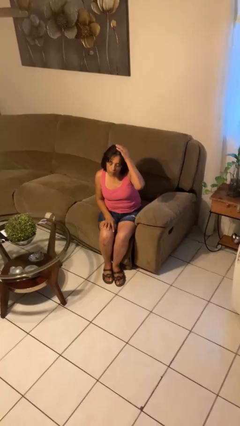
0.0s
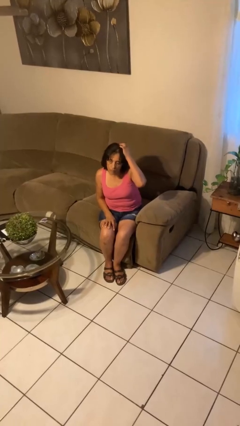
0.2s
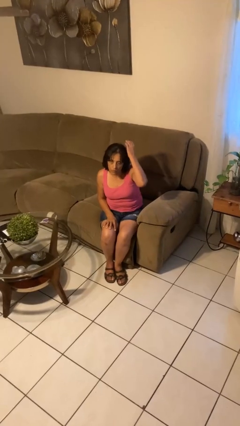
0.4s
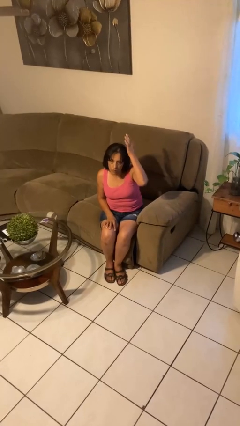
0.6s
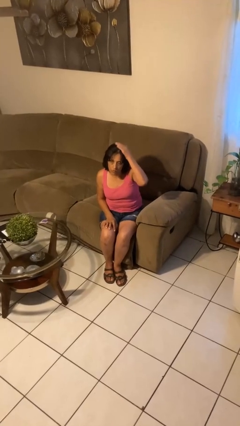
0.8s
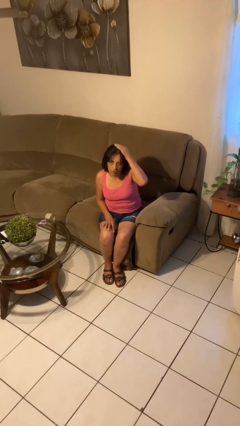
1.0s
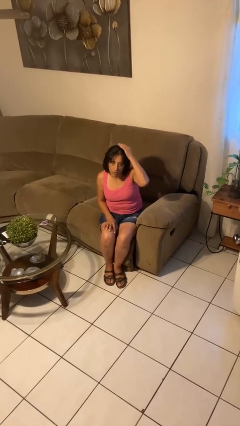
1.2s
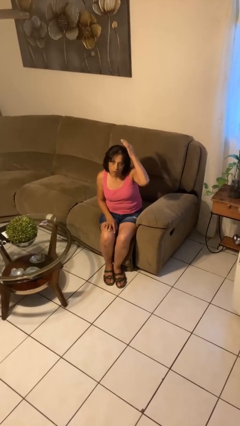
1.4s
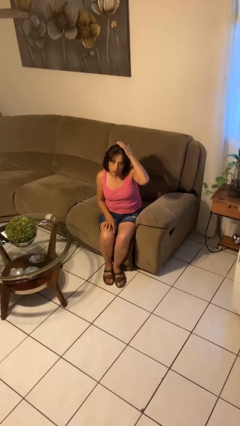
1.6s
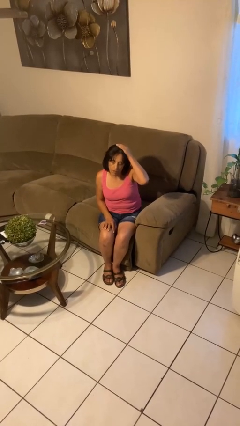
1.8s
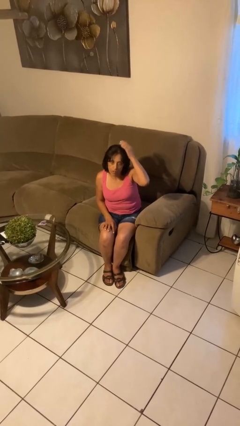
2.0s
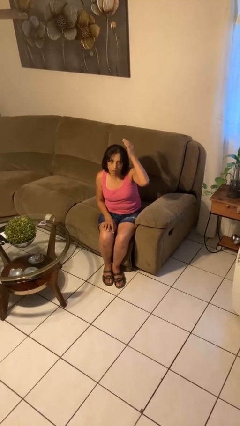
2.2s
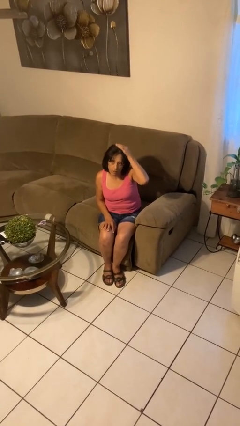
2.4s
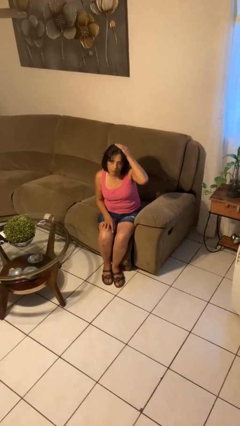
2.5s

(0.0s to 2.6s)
person pats head

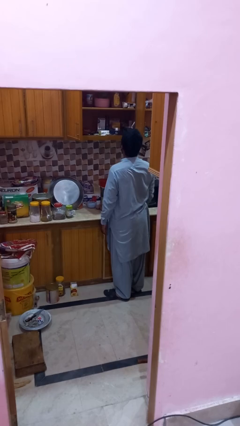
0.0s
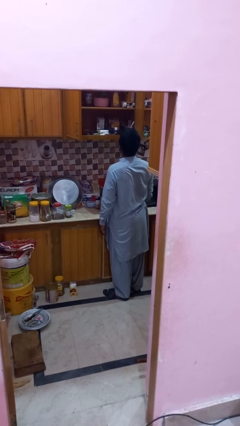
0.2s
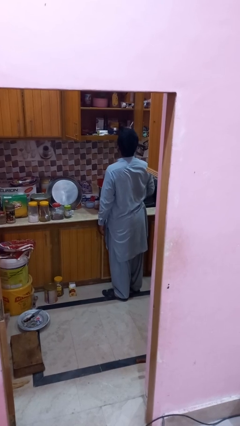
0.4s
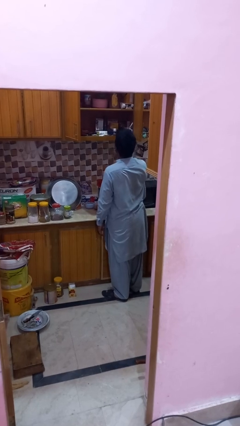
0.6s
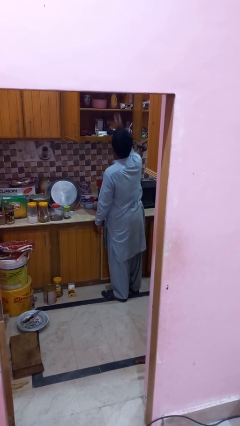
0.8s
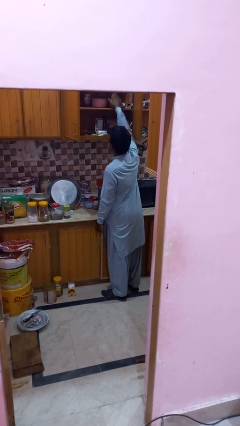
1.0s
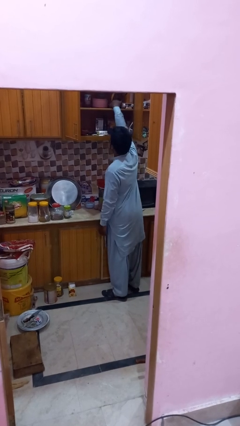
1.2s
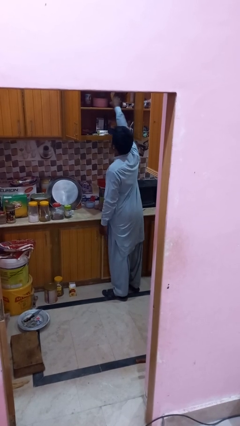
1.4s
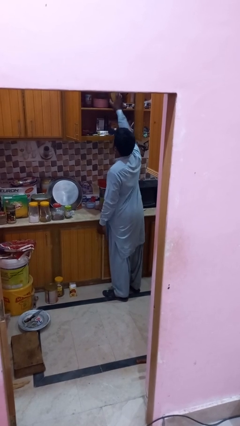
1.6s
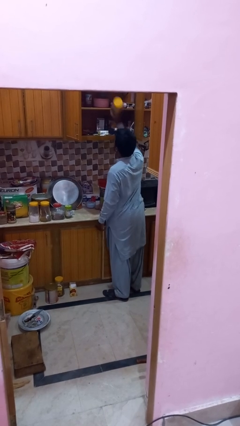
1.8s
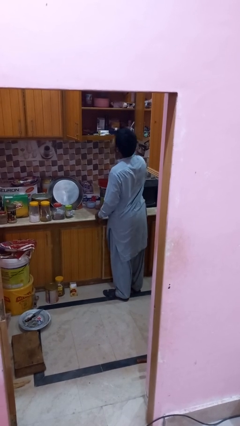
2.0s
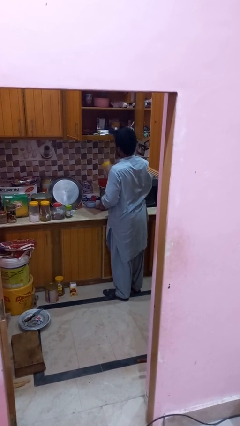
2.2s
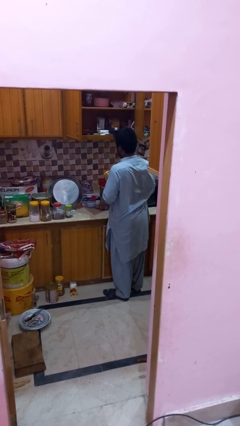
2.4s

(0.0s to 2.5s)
person takes object from cabinet

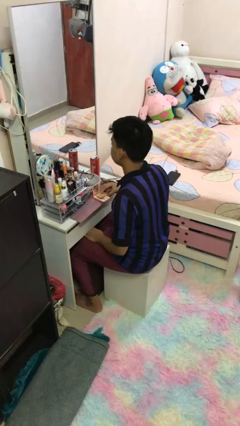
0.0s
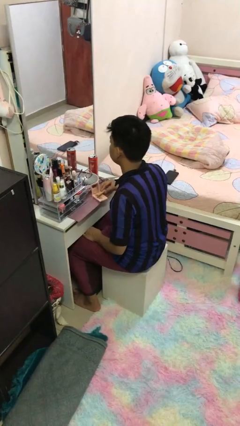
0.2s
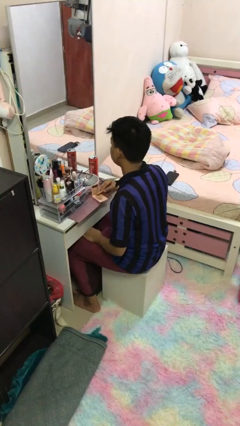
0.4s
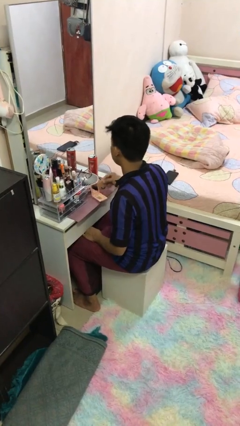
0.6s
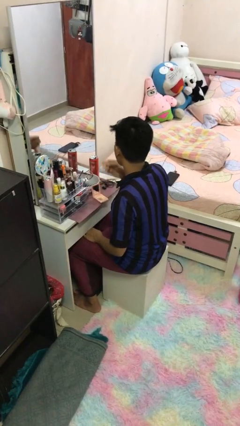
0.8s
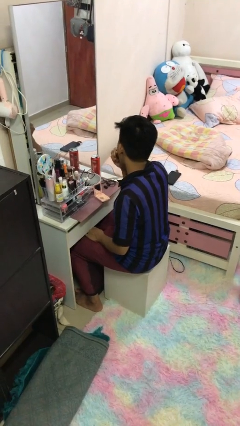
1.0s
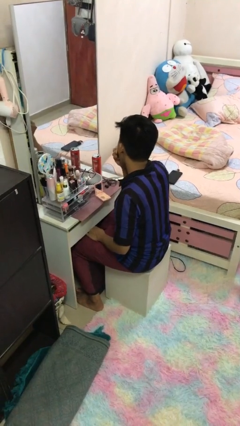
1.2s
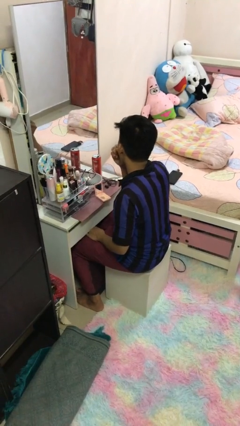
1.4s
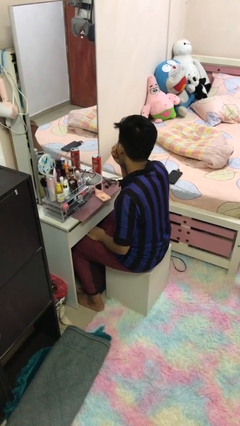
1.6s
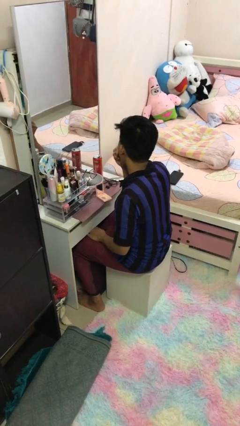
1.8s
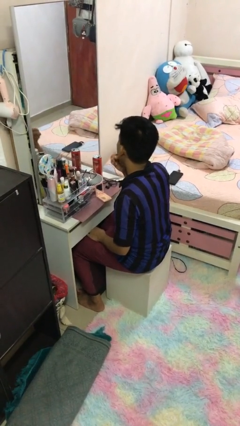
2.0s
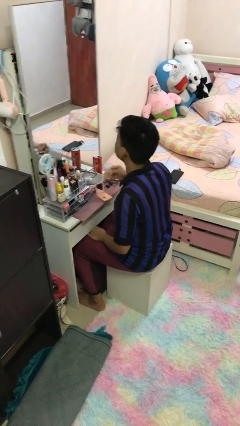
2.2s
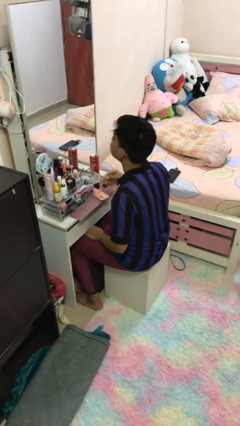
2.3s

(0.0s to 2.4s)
person applies foundation makeup

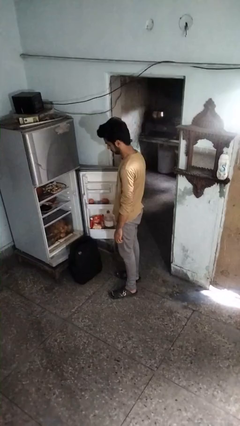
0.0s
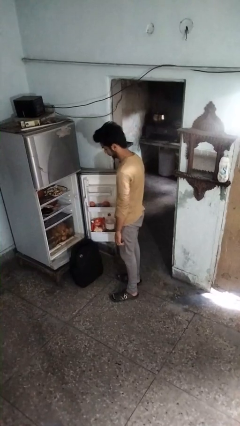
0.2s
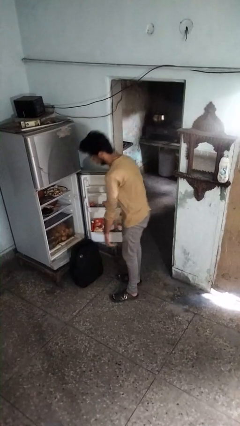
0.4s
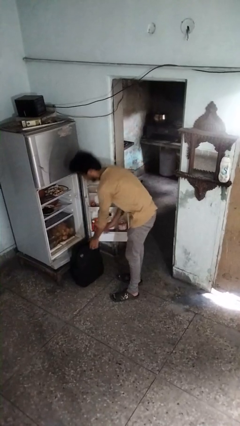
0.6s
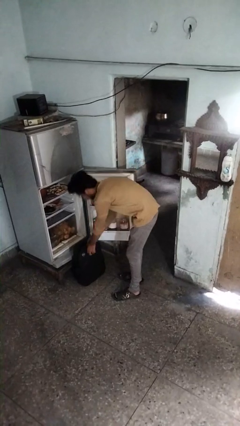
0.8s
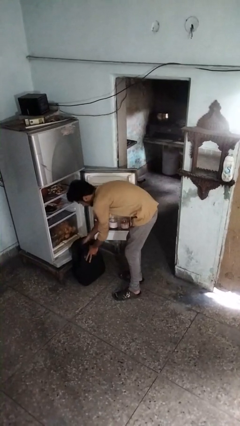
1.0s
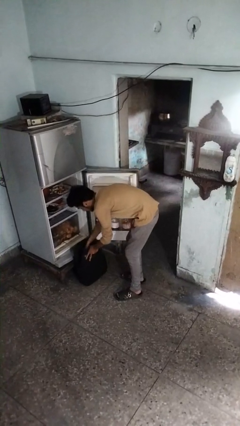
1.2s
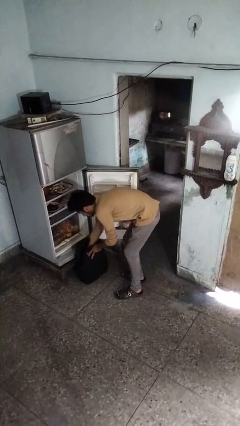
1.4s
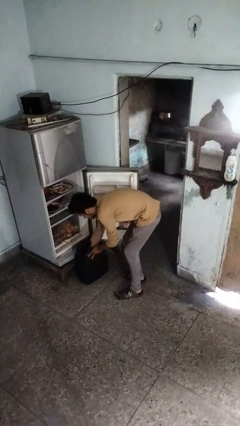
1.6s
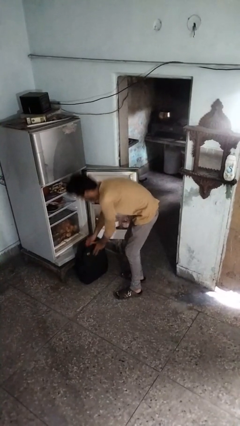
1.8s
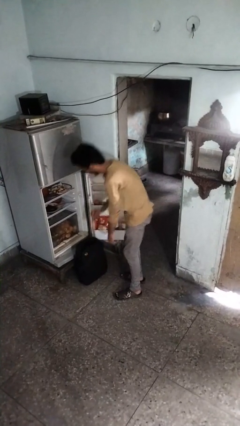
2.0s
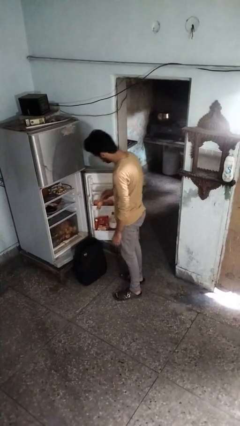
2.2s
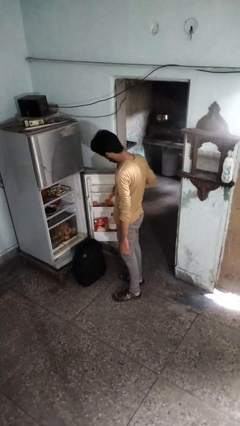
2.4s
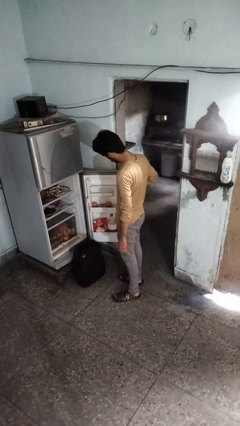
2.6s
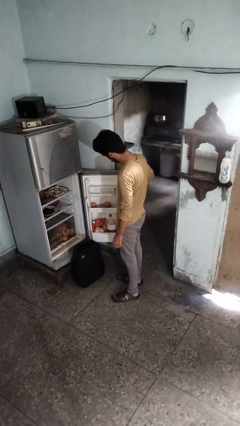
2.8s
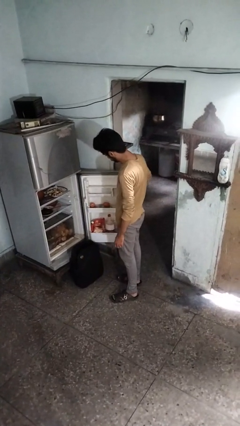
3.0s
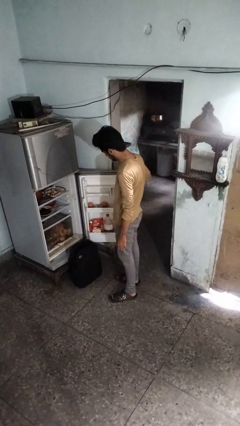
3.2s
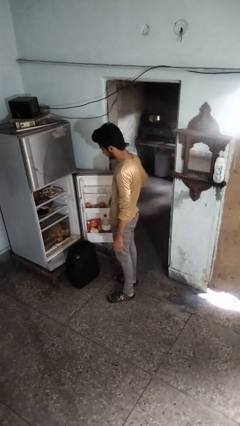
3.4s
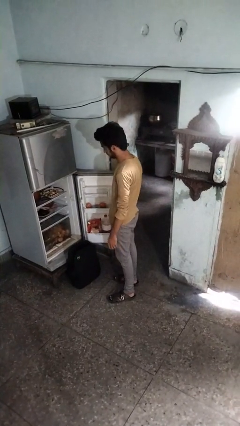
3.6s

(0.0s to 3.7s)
person loads groceries into refrigerator

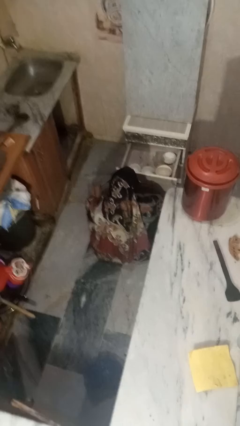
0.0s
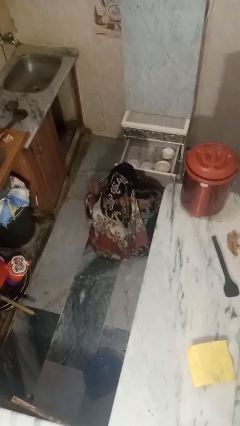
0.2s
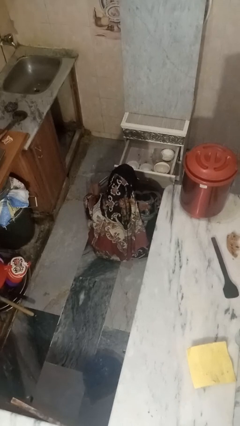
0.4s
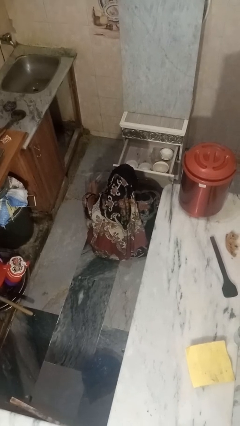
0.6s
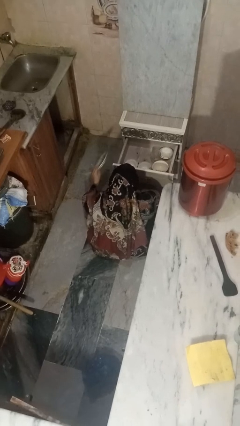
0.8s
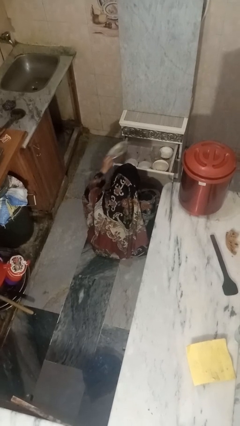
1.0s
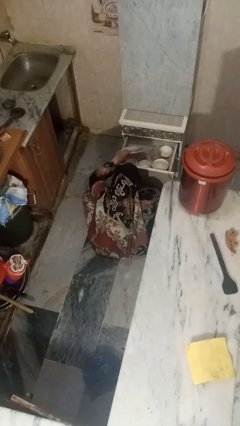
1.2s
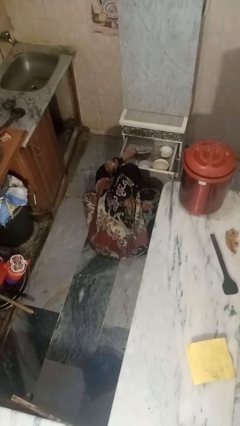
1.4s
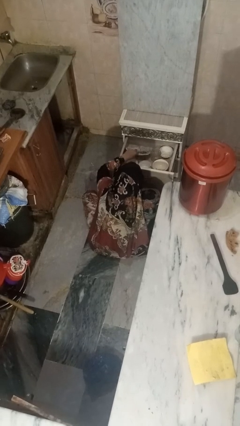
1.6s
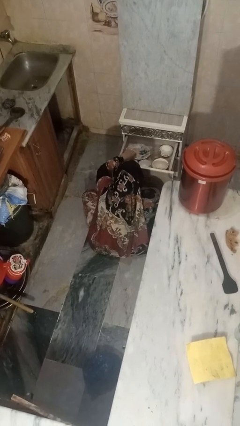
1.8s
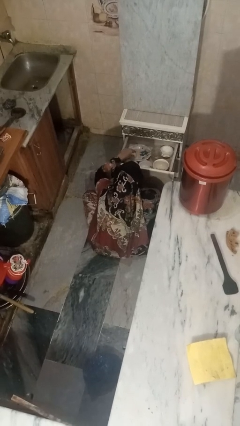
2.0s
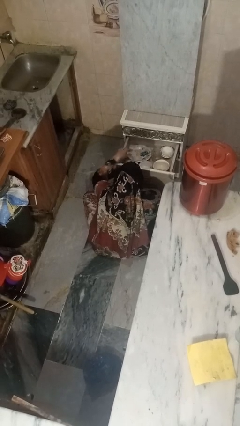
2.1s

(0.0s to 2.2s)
person puts object into kitchen drawer

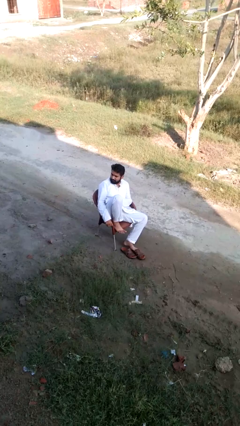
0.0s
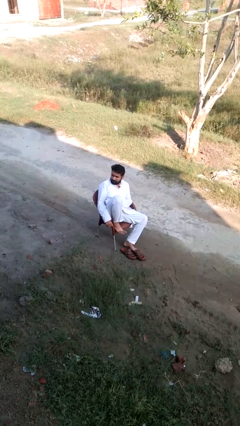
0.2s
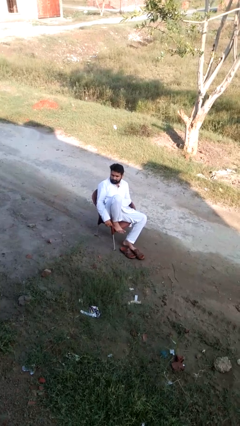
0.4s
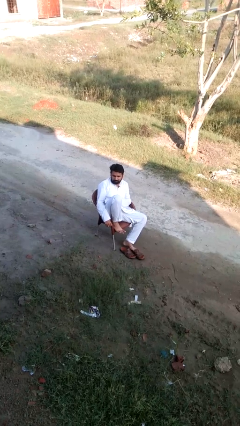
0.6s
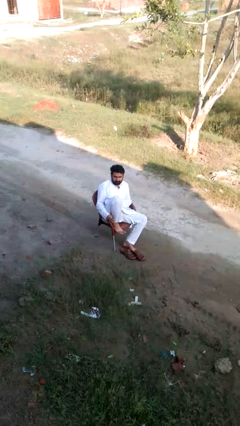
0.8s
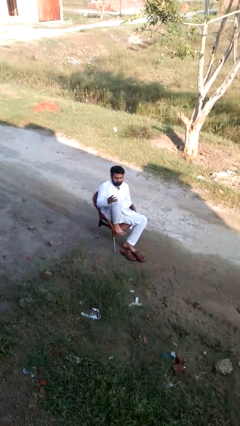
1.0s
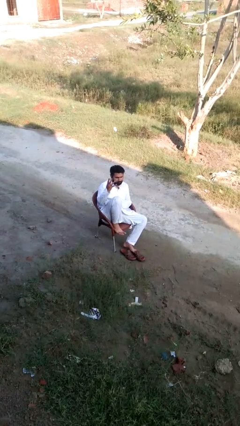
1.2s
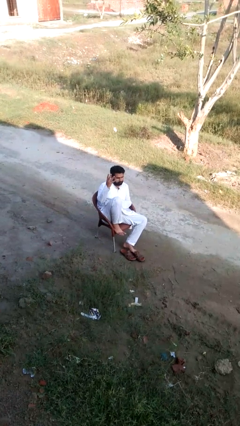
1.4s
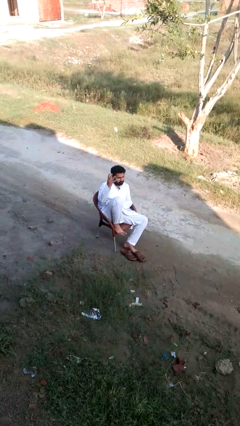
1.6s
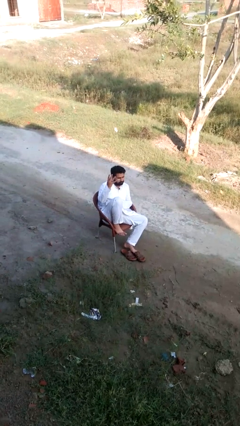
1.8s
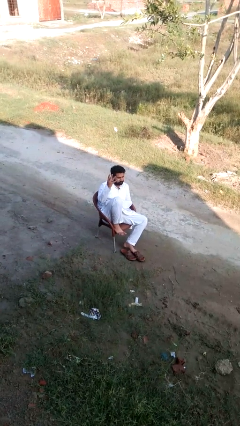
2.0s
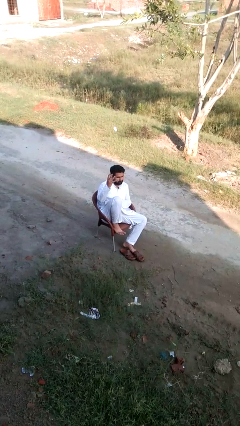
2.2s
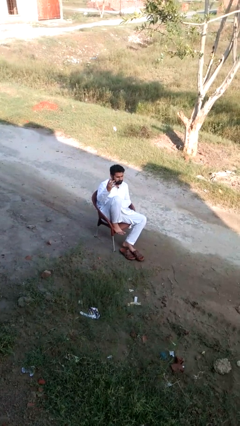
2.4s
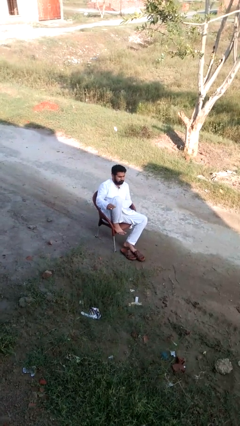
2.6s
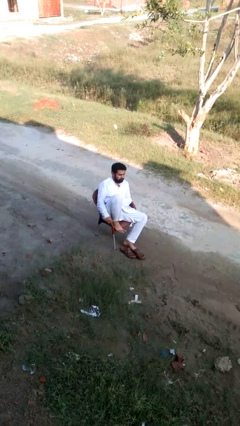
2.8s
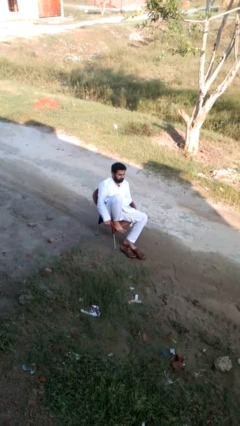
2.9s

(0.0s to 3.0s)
person gestures number four

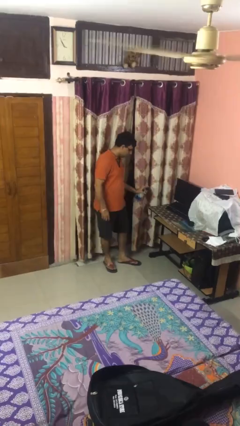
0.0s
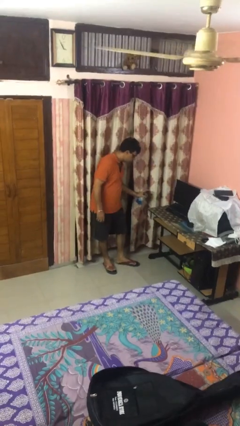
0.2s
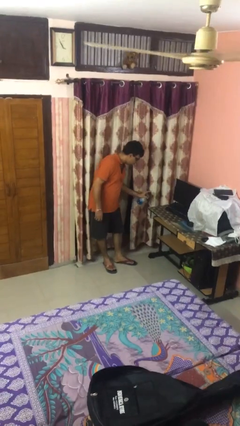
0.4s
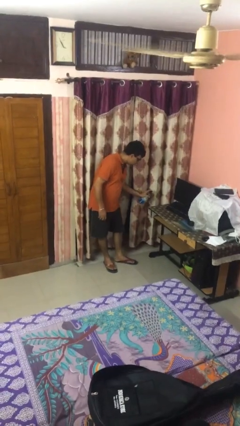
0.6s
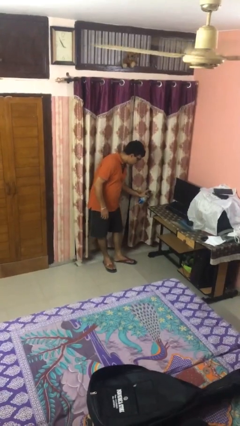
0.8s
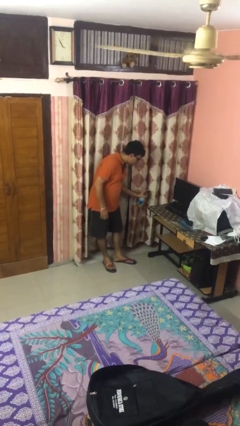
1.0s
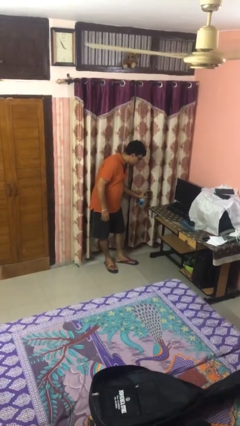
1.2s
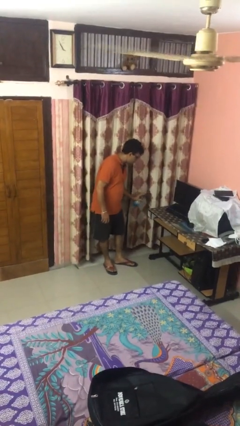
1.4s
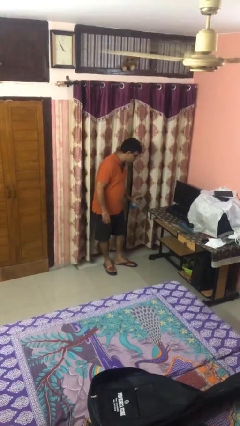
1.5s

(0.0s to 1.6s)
person sprays from bottle
